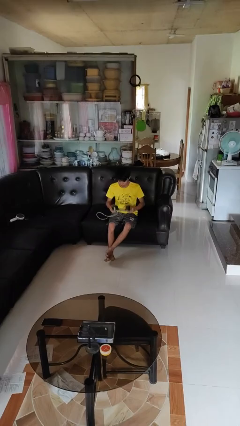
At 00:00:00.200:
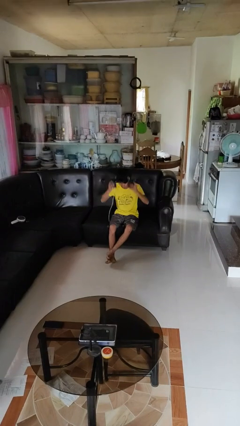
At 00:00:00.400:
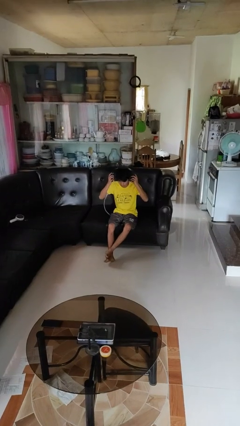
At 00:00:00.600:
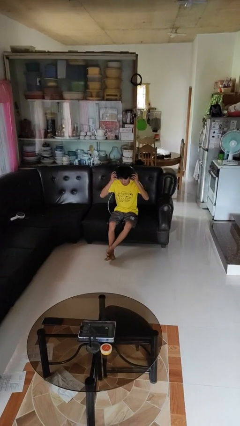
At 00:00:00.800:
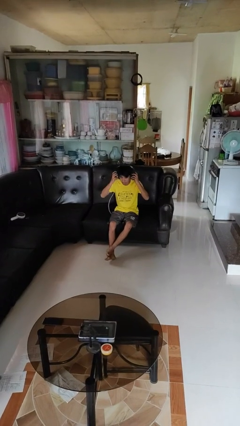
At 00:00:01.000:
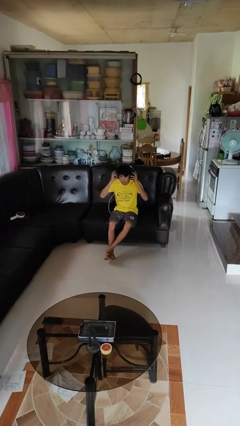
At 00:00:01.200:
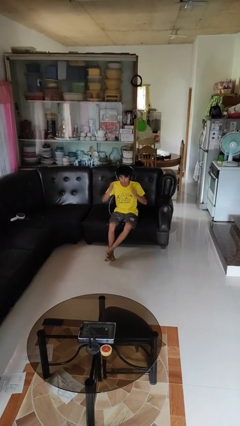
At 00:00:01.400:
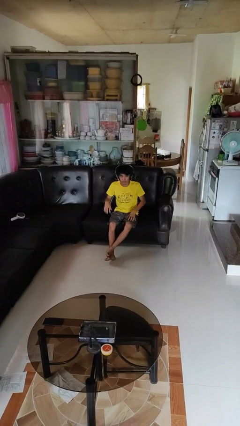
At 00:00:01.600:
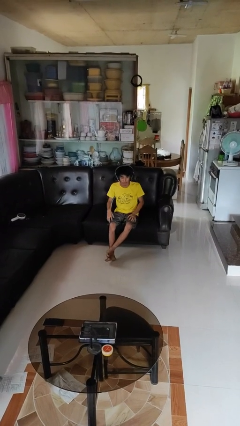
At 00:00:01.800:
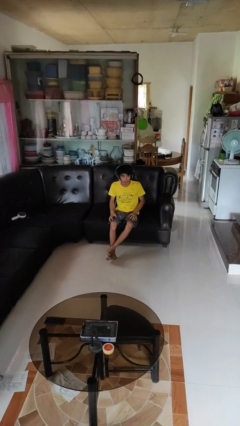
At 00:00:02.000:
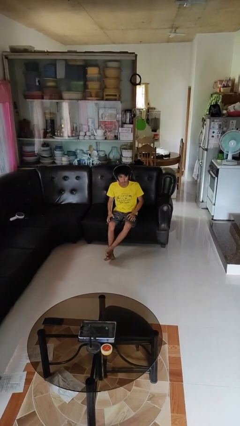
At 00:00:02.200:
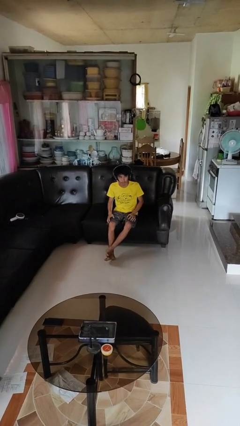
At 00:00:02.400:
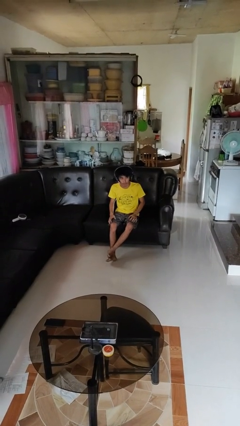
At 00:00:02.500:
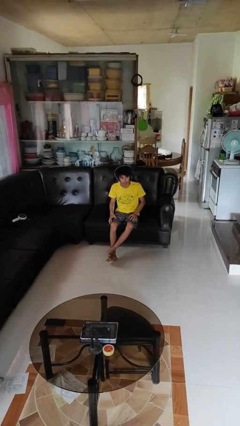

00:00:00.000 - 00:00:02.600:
person puts on headphones

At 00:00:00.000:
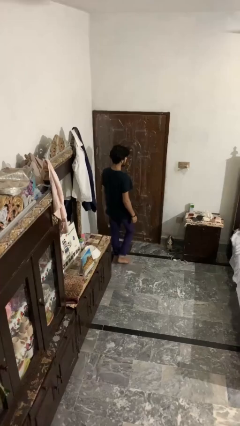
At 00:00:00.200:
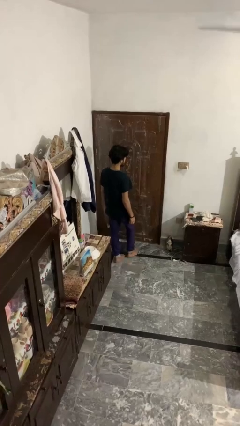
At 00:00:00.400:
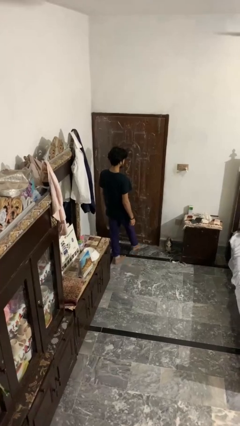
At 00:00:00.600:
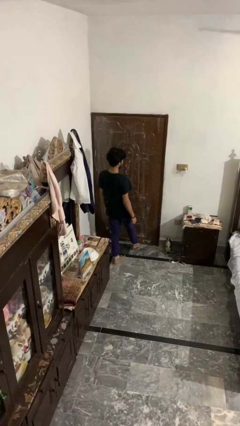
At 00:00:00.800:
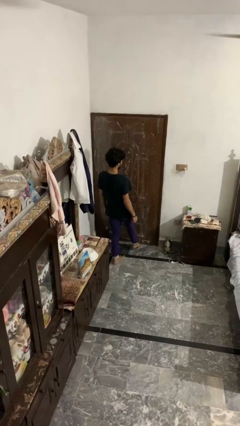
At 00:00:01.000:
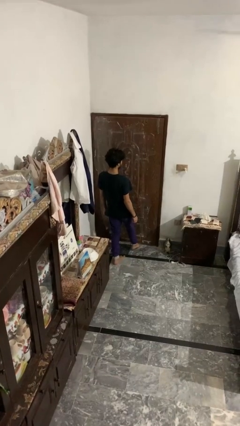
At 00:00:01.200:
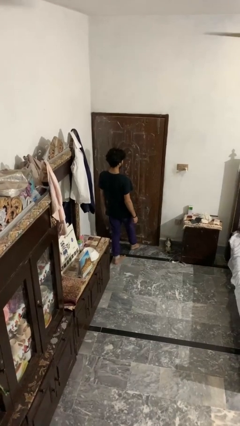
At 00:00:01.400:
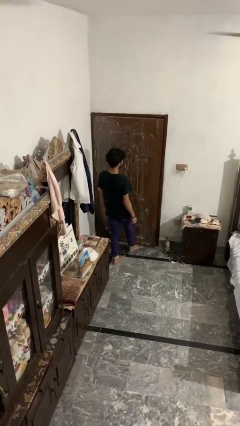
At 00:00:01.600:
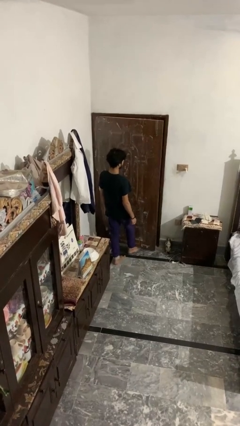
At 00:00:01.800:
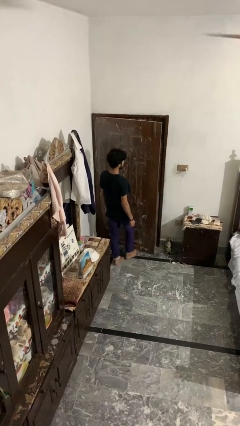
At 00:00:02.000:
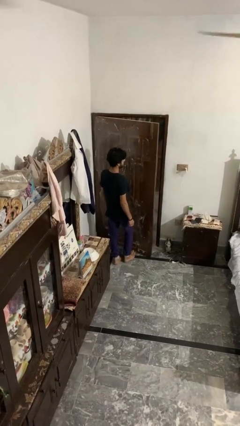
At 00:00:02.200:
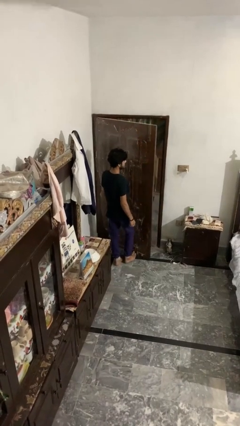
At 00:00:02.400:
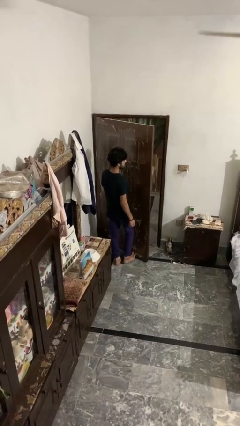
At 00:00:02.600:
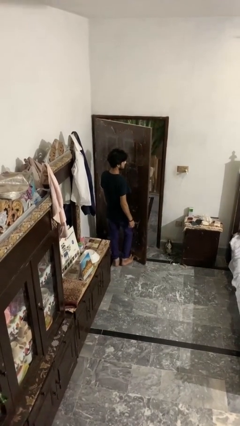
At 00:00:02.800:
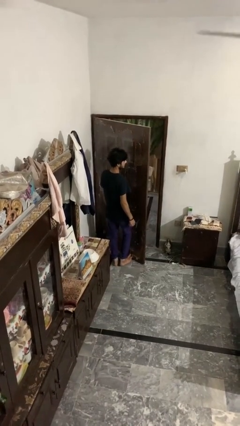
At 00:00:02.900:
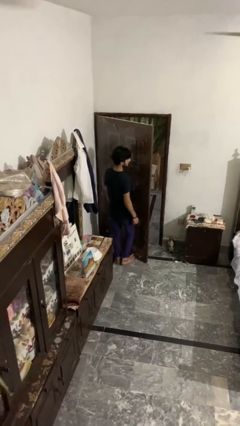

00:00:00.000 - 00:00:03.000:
person opens facility door

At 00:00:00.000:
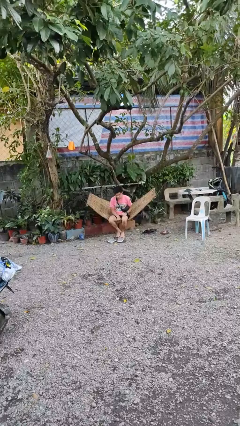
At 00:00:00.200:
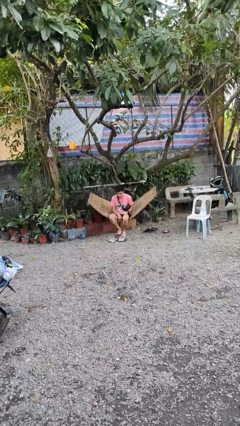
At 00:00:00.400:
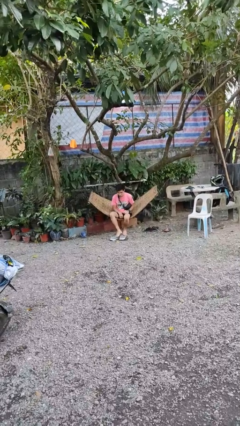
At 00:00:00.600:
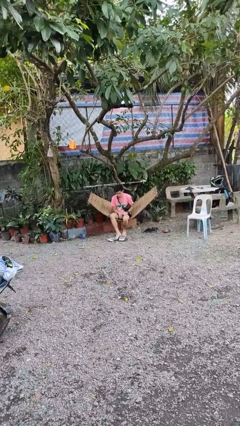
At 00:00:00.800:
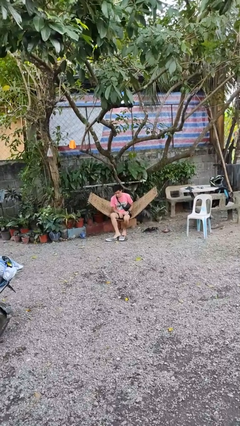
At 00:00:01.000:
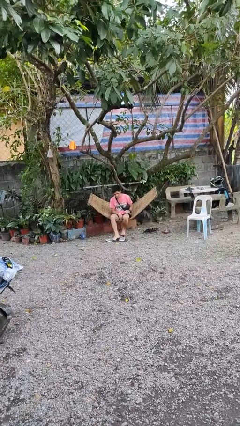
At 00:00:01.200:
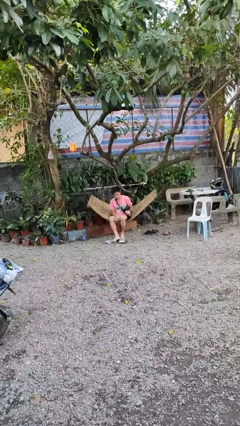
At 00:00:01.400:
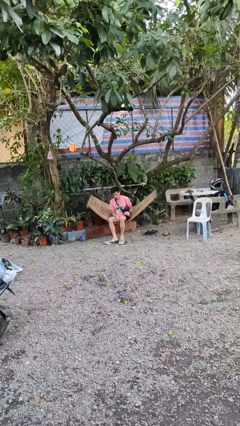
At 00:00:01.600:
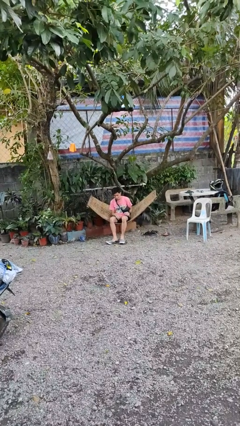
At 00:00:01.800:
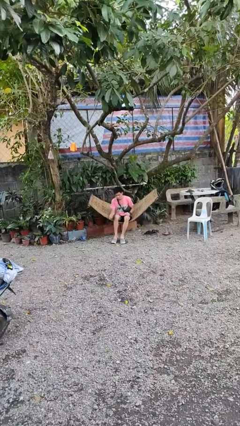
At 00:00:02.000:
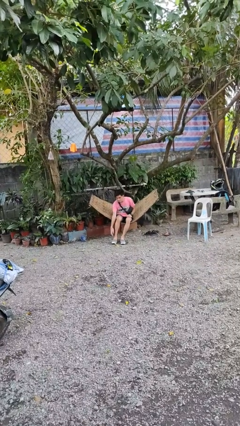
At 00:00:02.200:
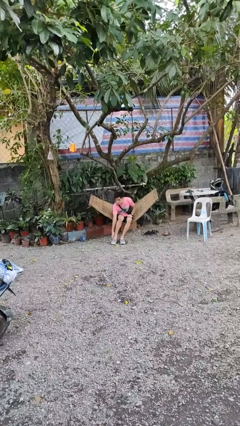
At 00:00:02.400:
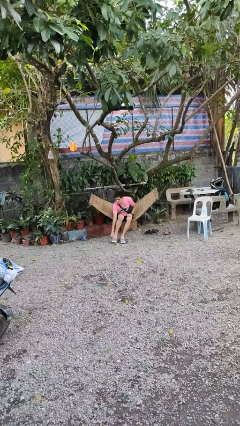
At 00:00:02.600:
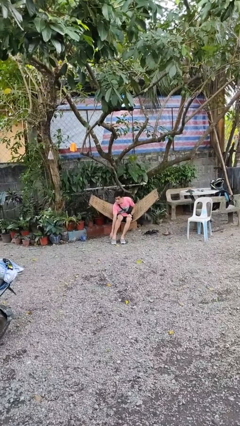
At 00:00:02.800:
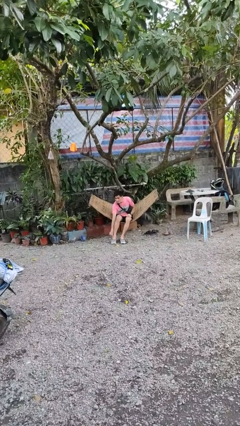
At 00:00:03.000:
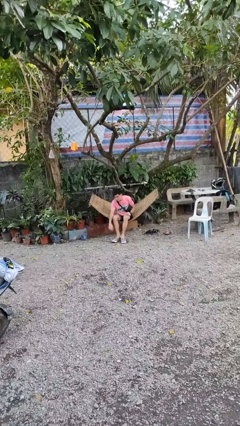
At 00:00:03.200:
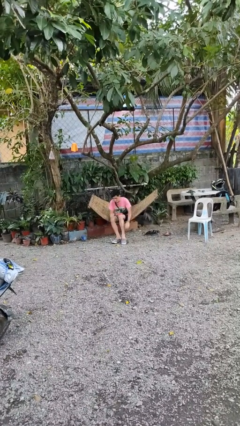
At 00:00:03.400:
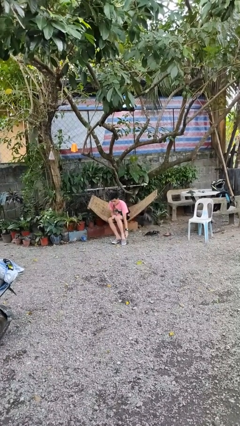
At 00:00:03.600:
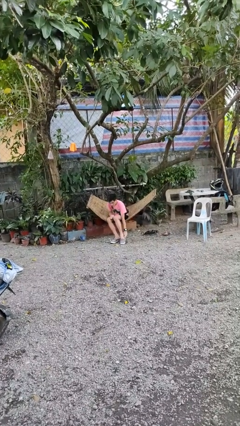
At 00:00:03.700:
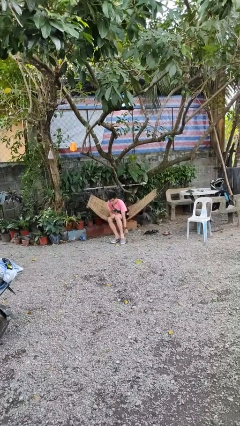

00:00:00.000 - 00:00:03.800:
person puts on shoes

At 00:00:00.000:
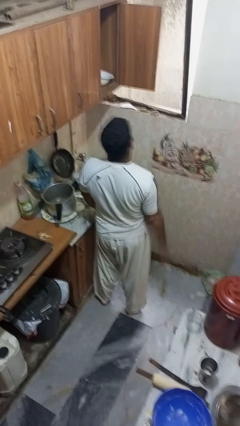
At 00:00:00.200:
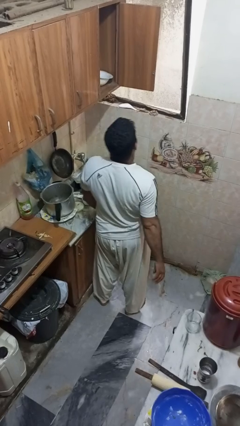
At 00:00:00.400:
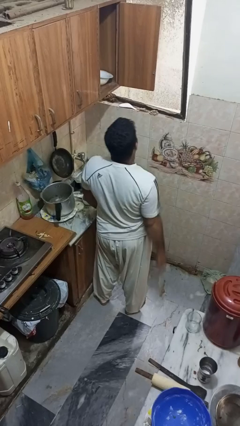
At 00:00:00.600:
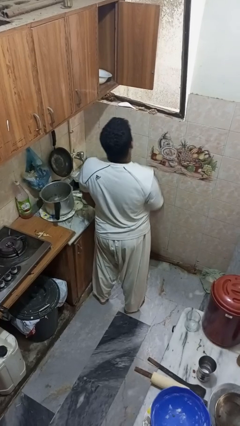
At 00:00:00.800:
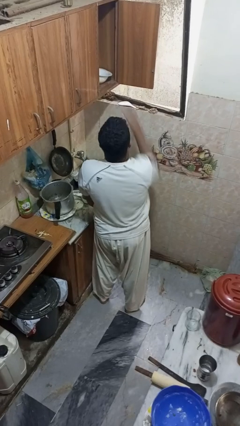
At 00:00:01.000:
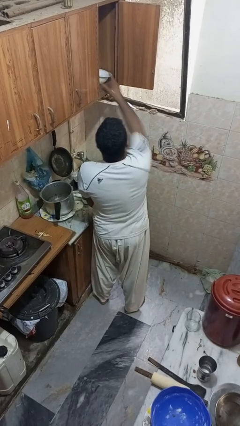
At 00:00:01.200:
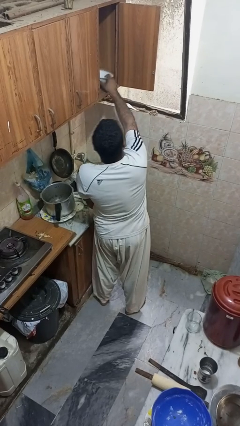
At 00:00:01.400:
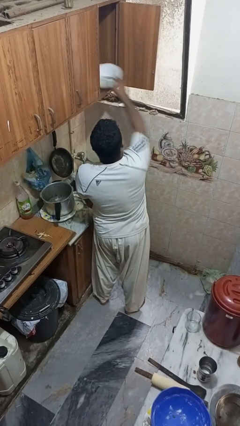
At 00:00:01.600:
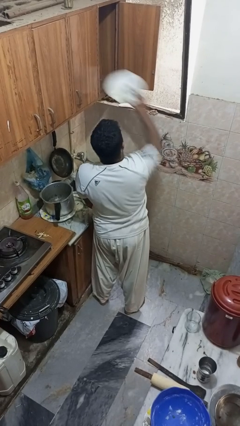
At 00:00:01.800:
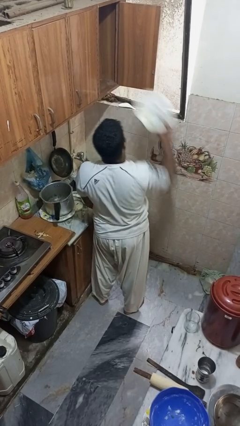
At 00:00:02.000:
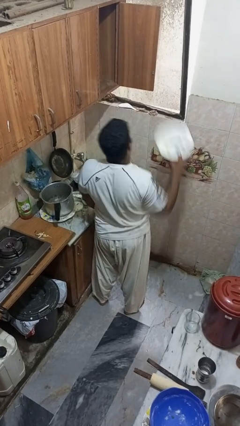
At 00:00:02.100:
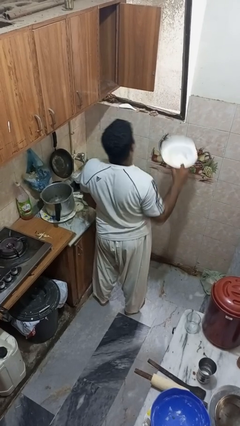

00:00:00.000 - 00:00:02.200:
person takes object from cabinet

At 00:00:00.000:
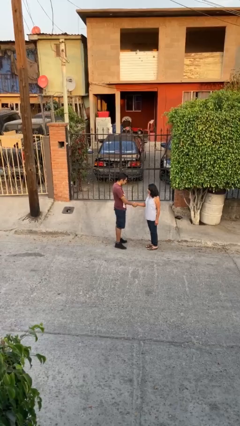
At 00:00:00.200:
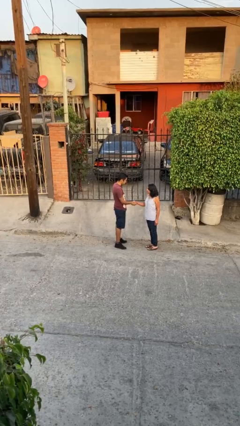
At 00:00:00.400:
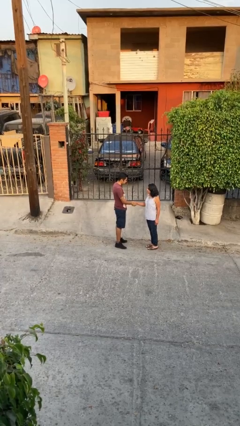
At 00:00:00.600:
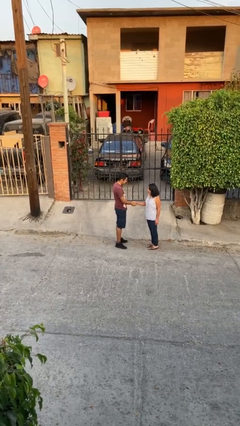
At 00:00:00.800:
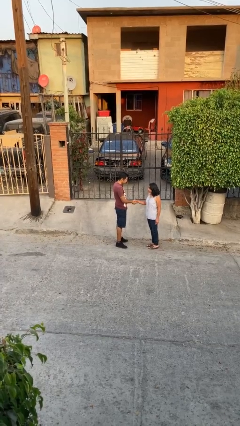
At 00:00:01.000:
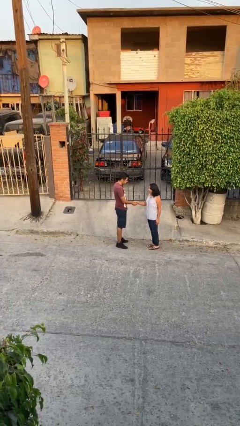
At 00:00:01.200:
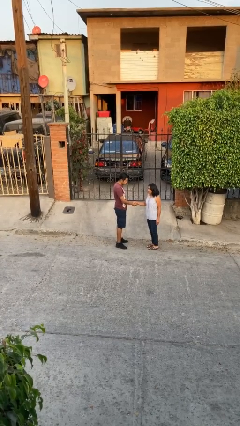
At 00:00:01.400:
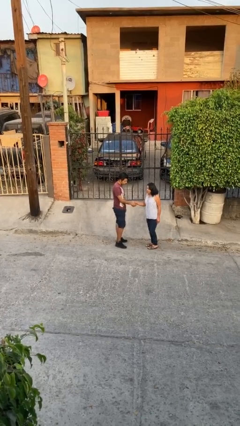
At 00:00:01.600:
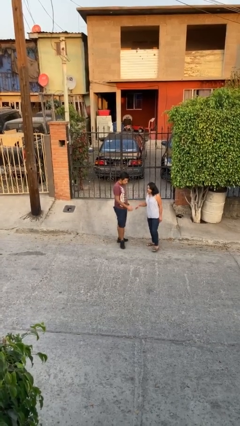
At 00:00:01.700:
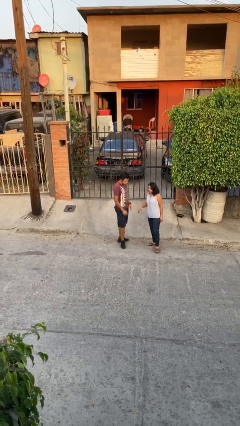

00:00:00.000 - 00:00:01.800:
person shakes hand

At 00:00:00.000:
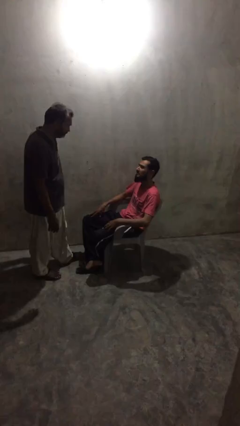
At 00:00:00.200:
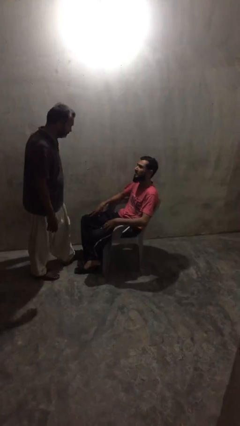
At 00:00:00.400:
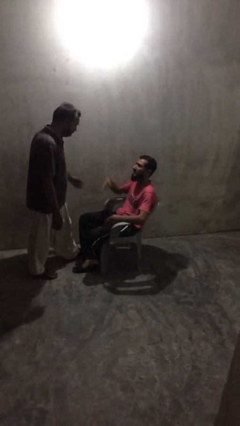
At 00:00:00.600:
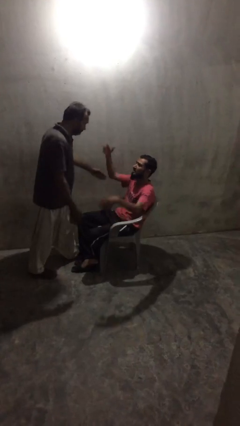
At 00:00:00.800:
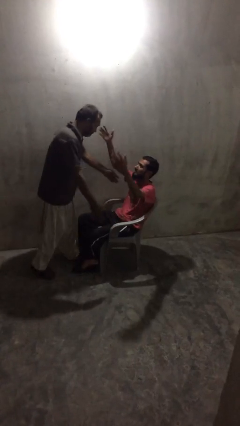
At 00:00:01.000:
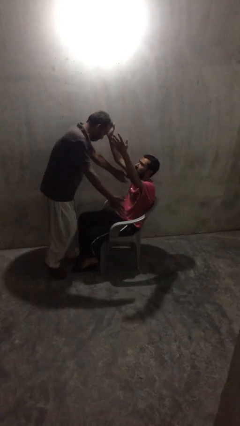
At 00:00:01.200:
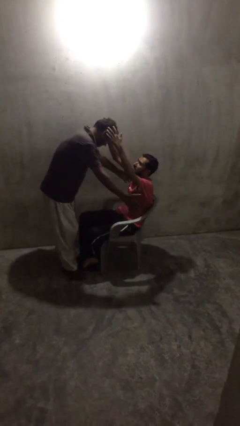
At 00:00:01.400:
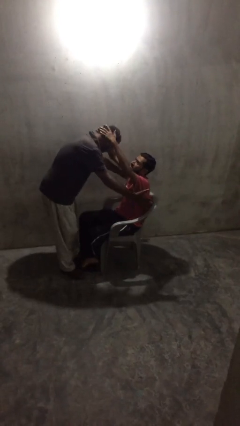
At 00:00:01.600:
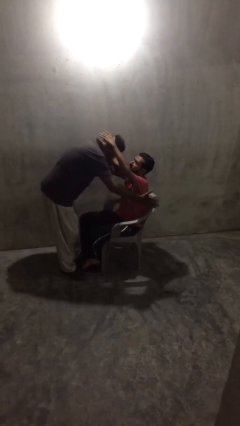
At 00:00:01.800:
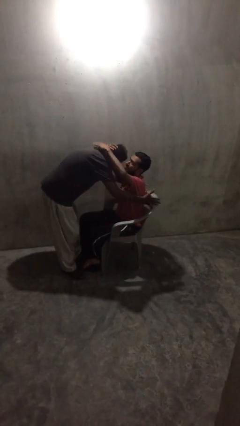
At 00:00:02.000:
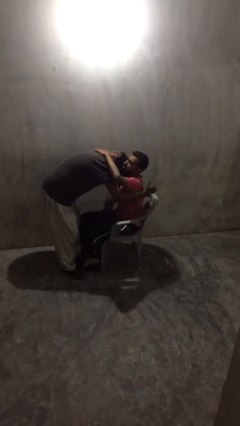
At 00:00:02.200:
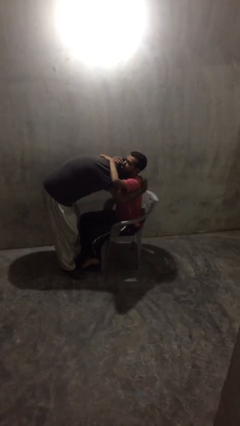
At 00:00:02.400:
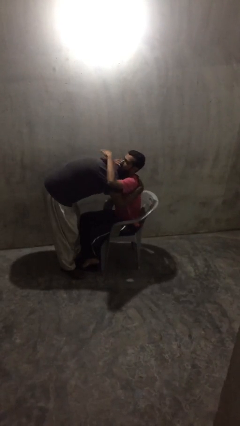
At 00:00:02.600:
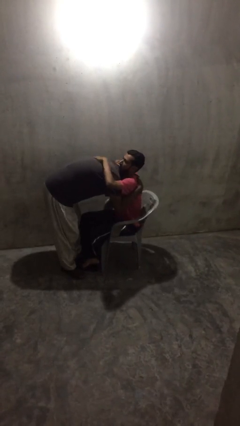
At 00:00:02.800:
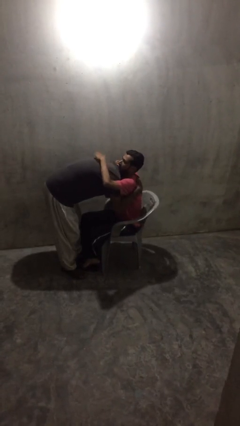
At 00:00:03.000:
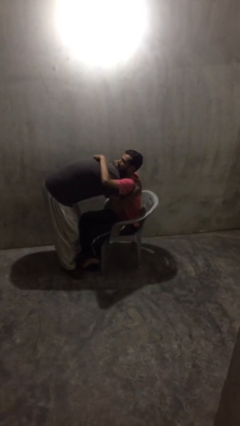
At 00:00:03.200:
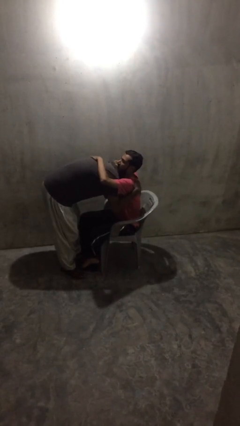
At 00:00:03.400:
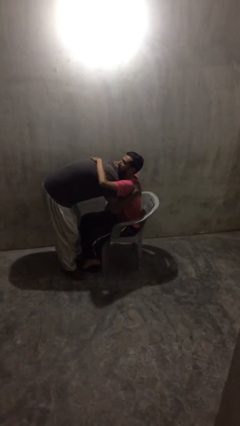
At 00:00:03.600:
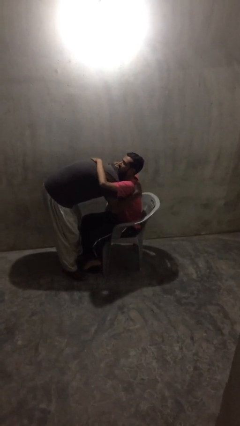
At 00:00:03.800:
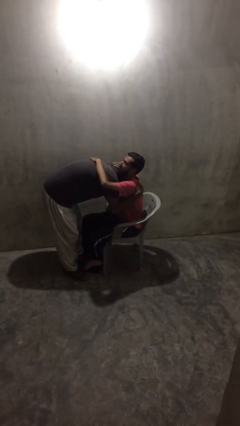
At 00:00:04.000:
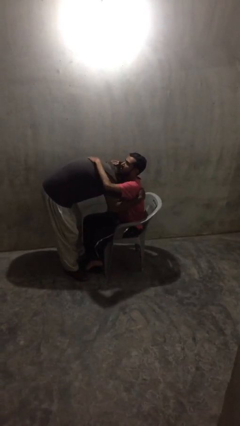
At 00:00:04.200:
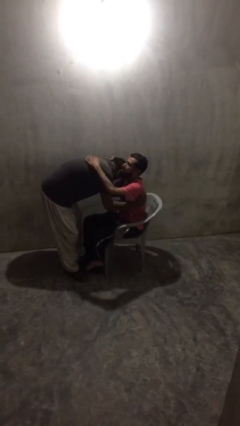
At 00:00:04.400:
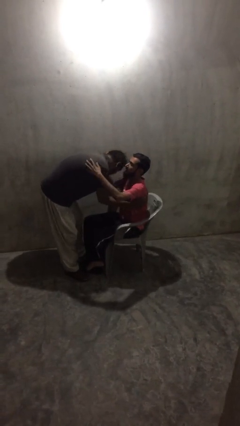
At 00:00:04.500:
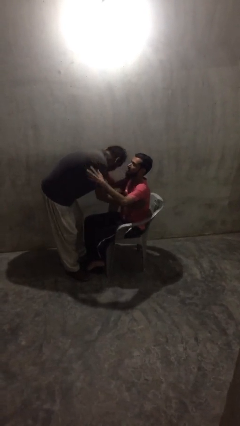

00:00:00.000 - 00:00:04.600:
person embraces person
